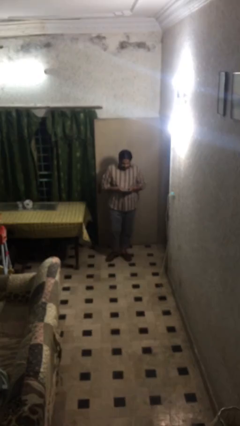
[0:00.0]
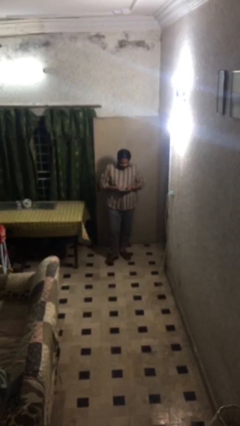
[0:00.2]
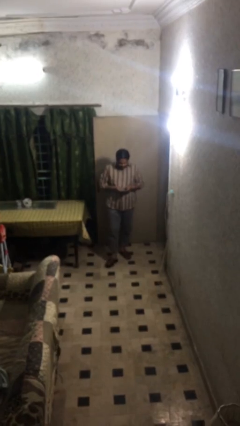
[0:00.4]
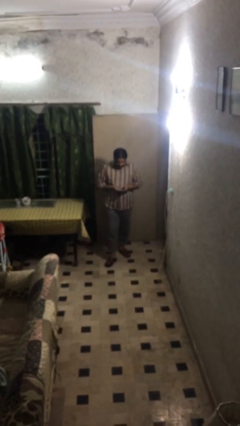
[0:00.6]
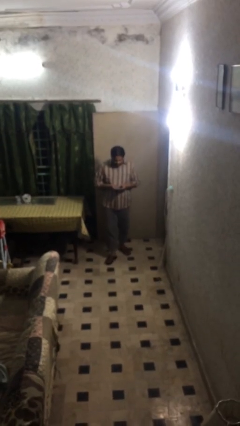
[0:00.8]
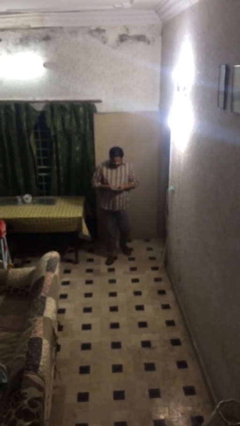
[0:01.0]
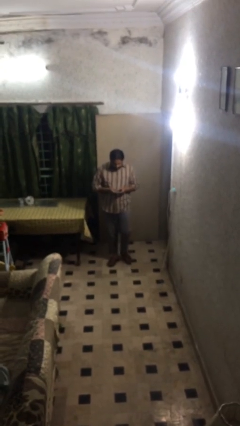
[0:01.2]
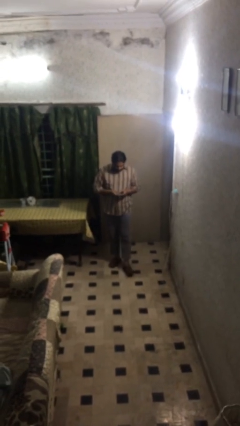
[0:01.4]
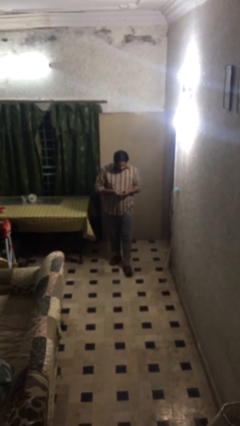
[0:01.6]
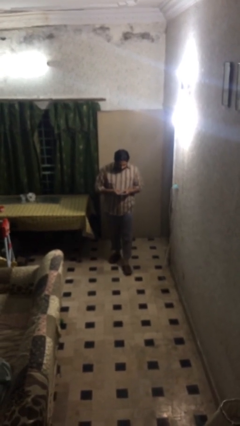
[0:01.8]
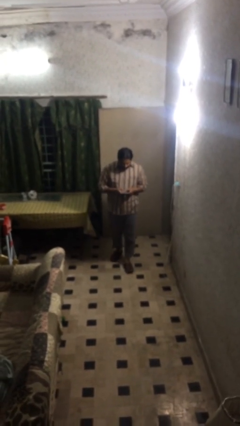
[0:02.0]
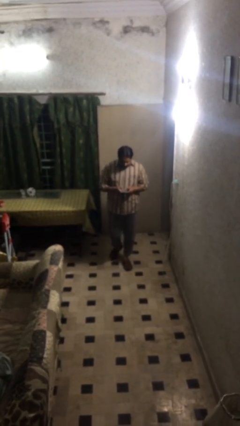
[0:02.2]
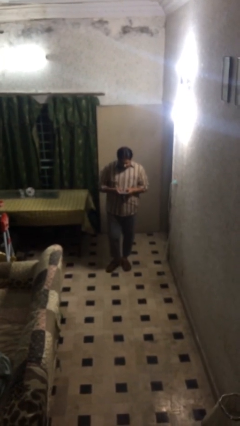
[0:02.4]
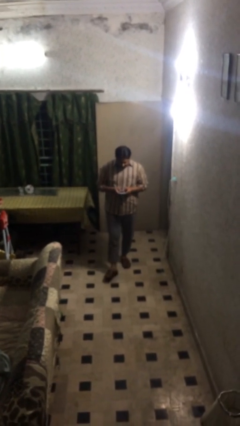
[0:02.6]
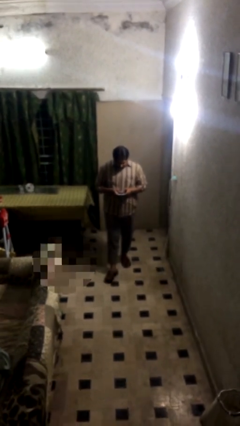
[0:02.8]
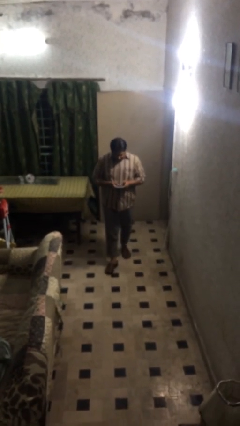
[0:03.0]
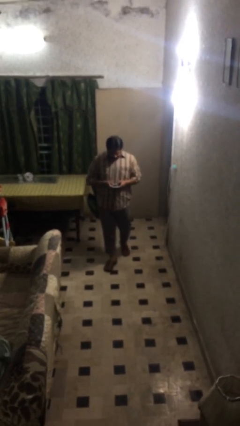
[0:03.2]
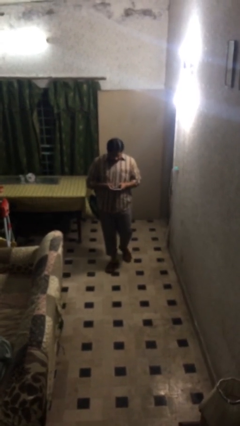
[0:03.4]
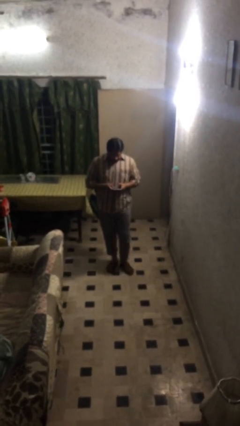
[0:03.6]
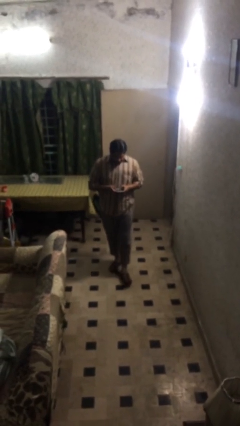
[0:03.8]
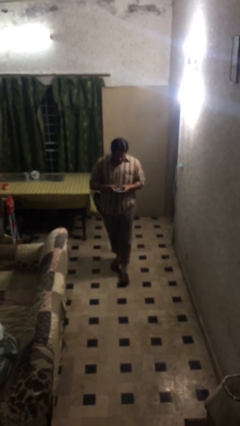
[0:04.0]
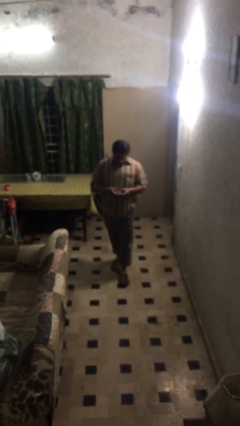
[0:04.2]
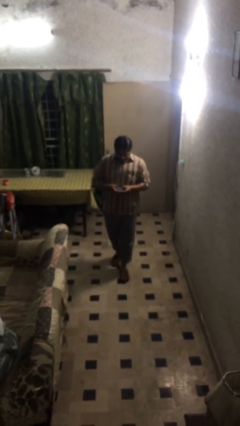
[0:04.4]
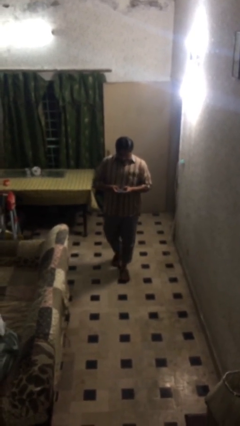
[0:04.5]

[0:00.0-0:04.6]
person texts on phone

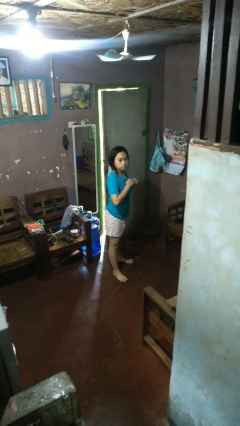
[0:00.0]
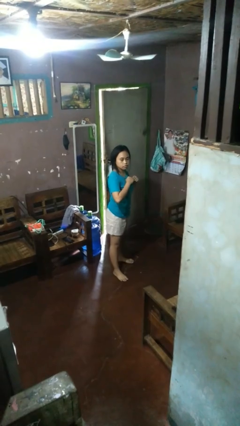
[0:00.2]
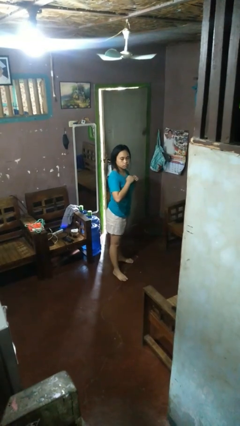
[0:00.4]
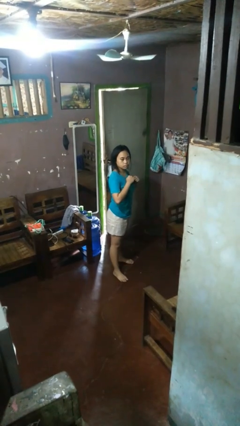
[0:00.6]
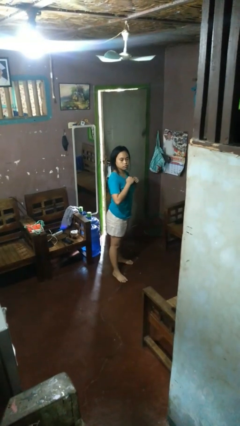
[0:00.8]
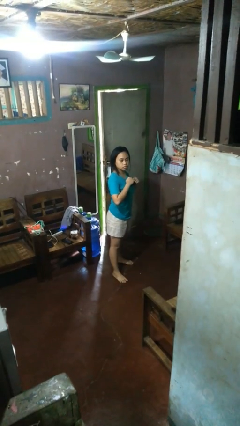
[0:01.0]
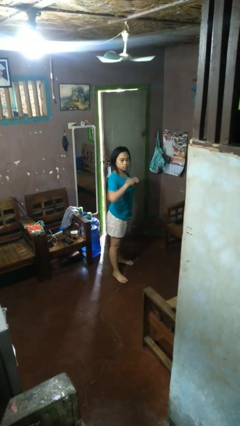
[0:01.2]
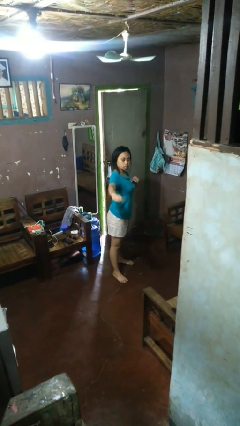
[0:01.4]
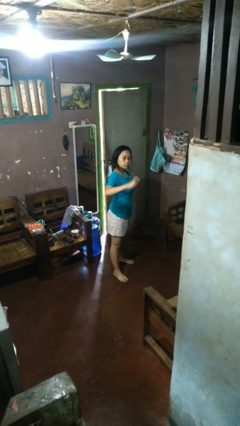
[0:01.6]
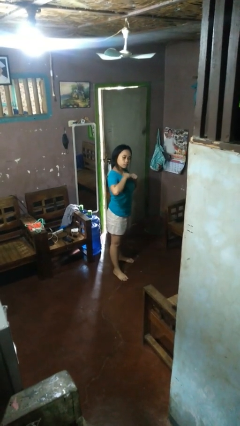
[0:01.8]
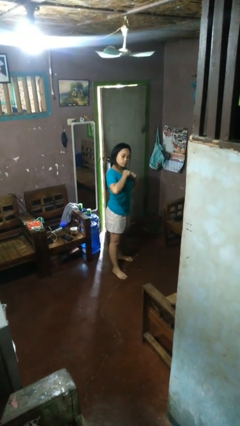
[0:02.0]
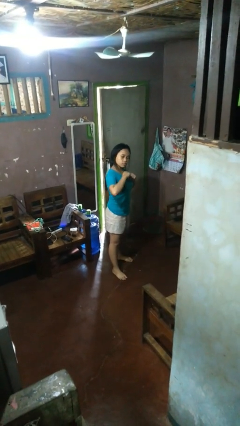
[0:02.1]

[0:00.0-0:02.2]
person karate chop

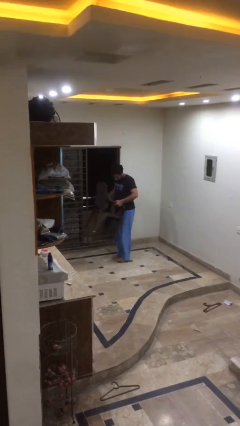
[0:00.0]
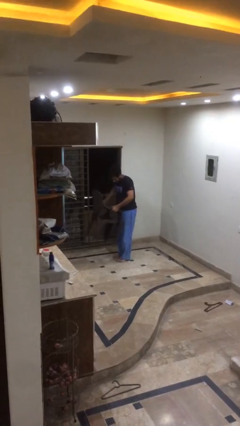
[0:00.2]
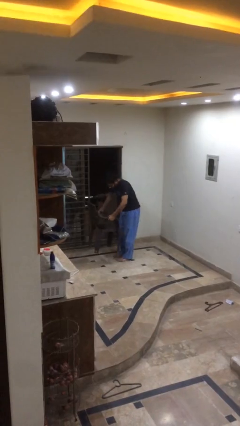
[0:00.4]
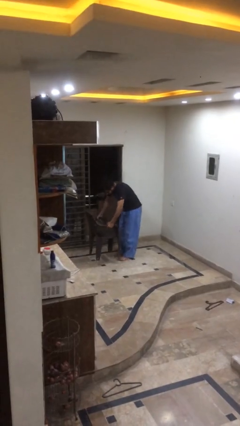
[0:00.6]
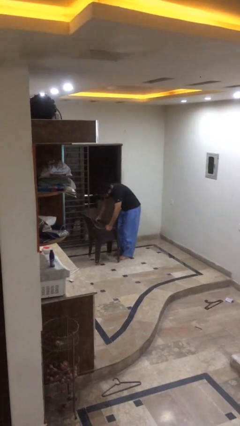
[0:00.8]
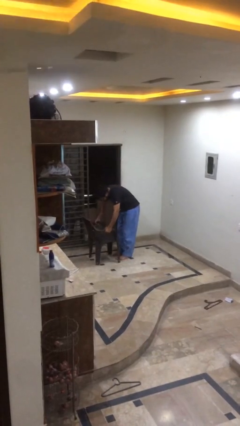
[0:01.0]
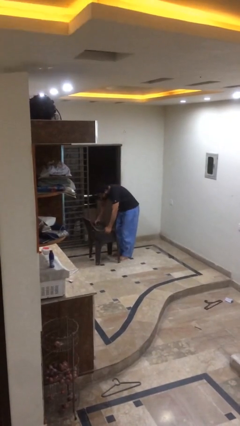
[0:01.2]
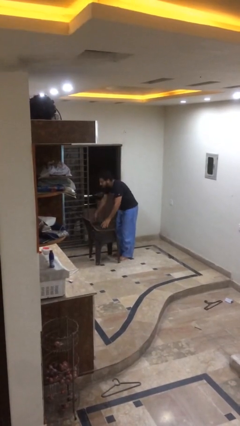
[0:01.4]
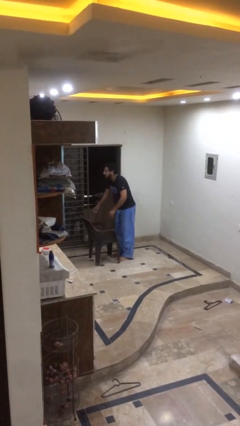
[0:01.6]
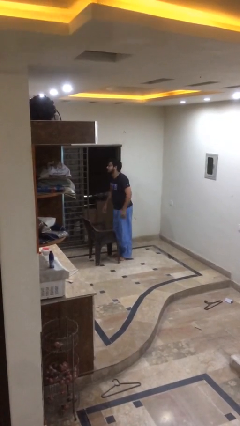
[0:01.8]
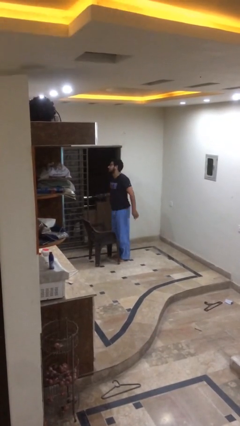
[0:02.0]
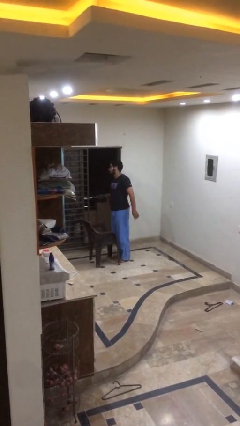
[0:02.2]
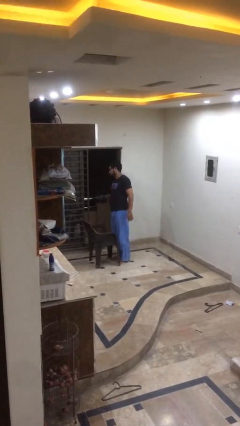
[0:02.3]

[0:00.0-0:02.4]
person puts down object on floor

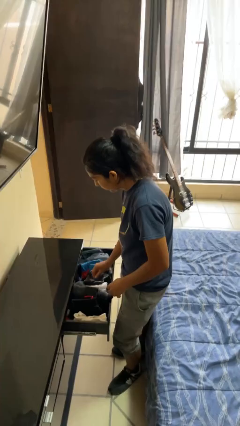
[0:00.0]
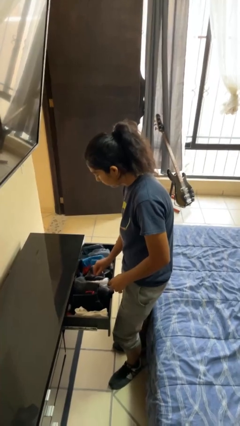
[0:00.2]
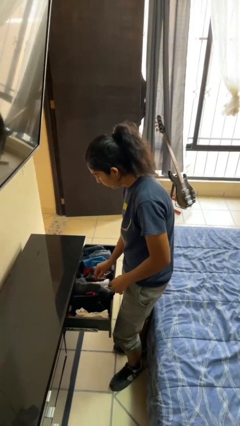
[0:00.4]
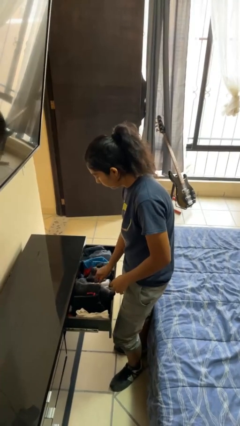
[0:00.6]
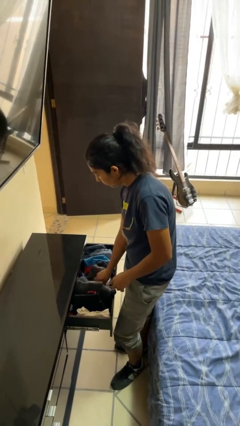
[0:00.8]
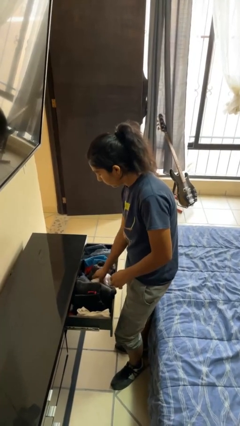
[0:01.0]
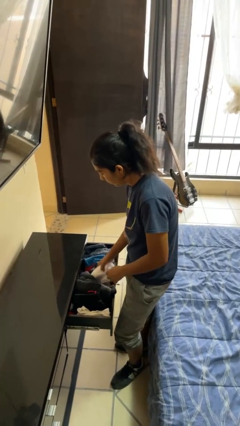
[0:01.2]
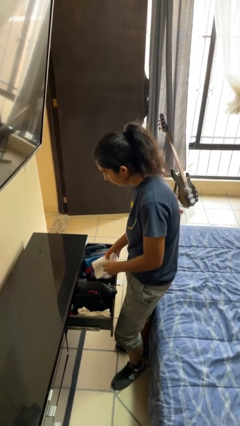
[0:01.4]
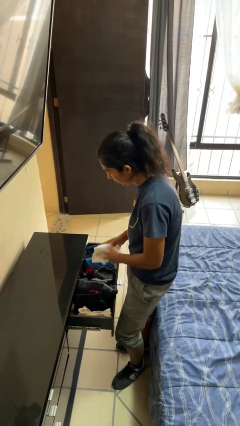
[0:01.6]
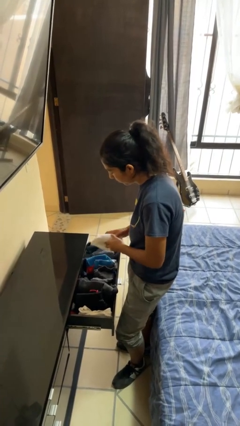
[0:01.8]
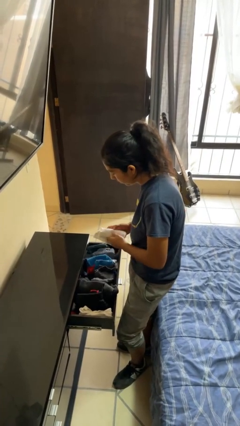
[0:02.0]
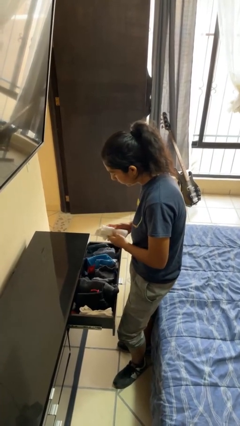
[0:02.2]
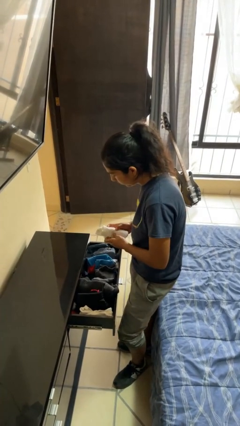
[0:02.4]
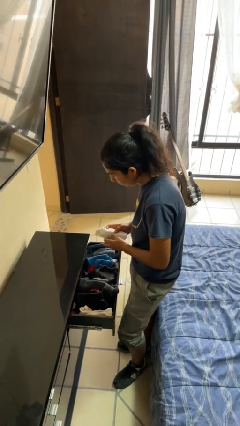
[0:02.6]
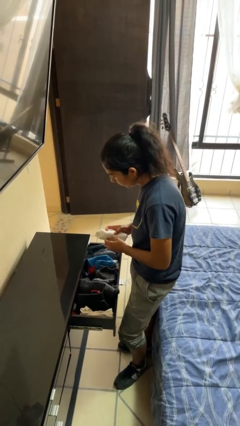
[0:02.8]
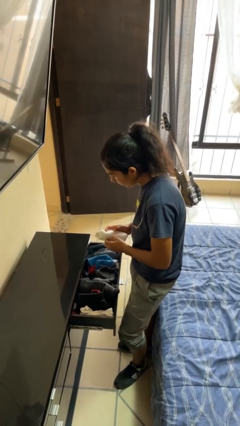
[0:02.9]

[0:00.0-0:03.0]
person takes clothes from dresser

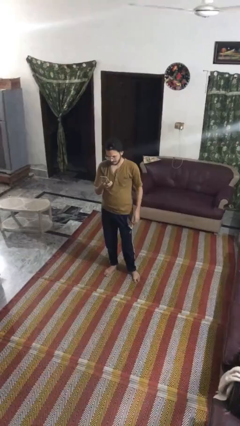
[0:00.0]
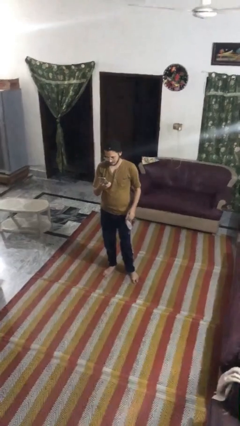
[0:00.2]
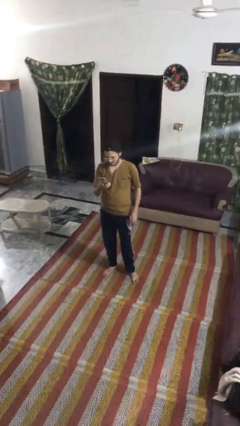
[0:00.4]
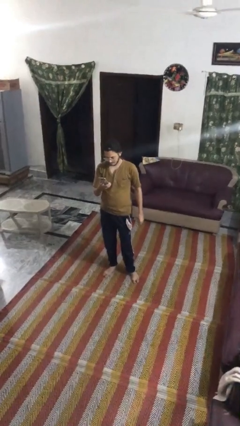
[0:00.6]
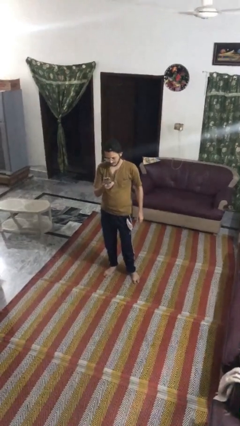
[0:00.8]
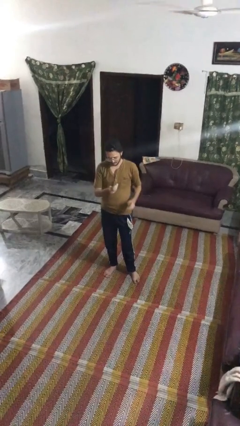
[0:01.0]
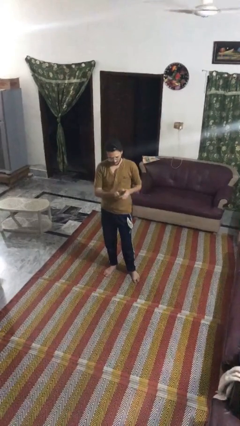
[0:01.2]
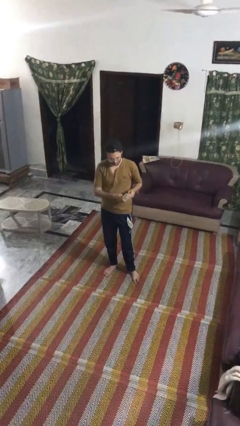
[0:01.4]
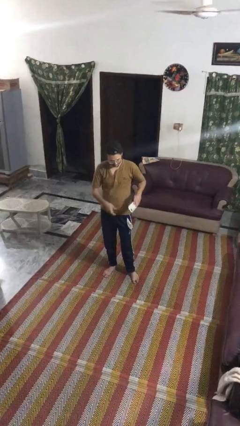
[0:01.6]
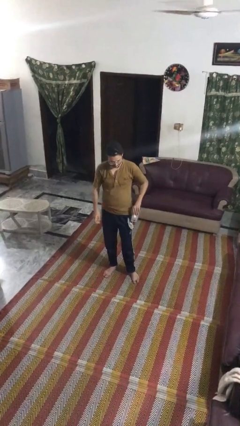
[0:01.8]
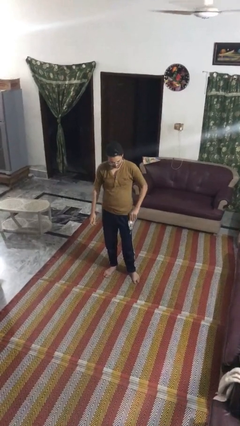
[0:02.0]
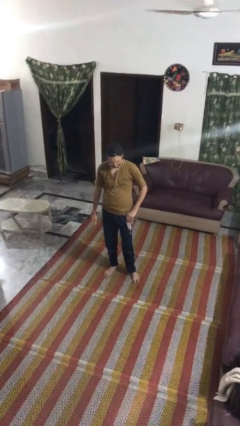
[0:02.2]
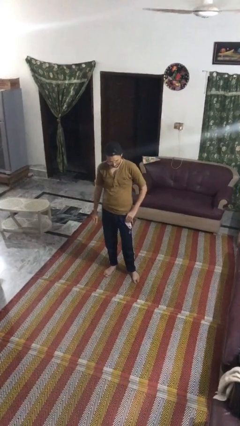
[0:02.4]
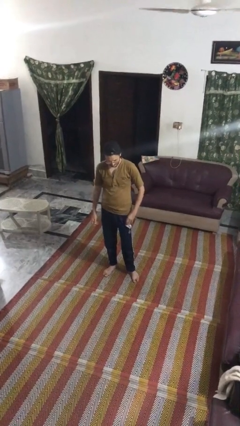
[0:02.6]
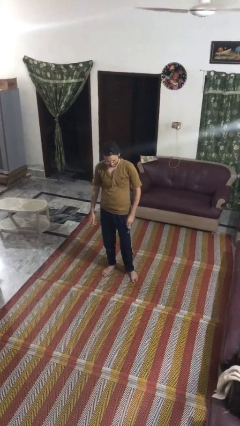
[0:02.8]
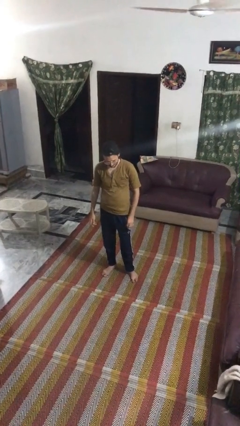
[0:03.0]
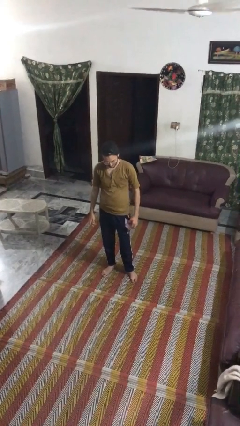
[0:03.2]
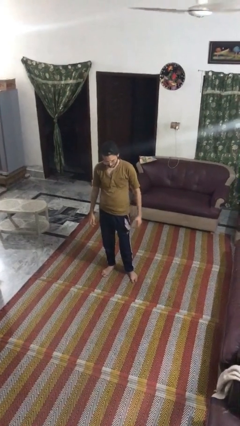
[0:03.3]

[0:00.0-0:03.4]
person puts phone into pocket

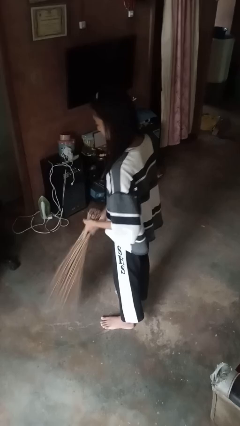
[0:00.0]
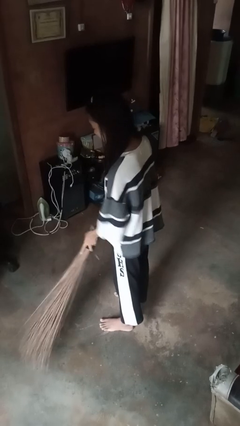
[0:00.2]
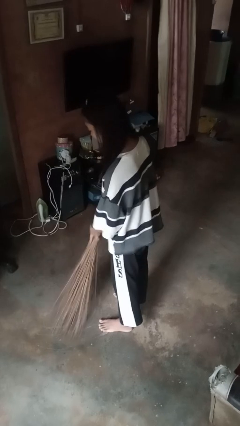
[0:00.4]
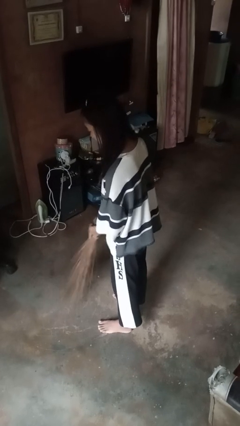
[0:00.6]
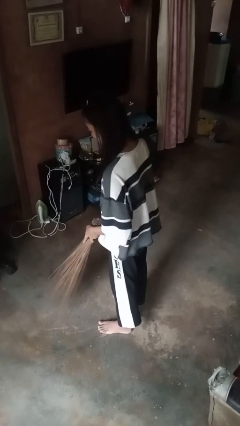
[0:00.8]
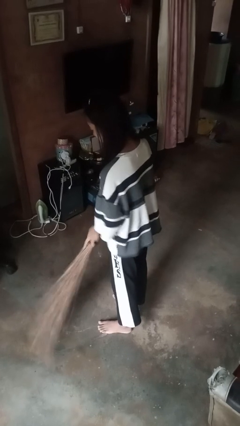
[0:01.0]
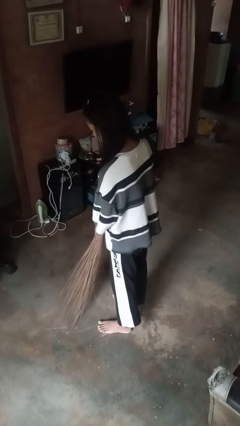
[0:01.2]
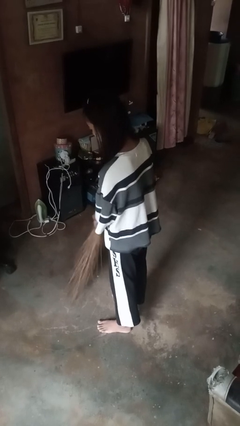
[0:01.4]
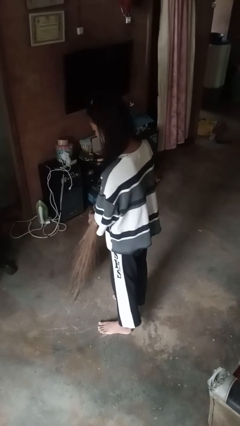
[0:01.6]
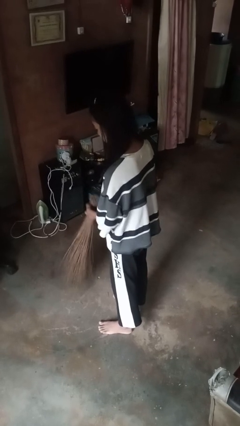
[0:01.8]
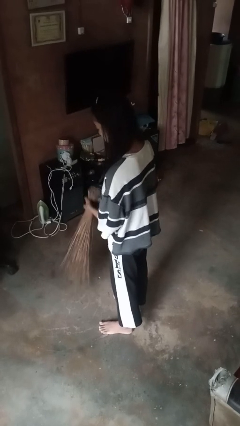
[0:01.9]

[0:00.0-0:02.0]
person sweeps floor
